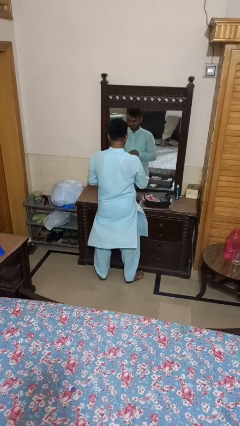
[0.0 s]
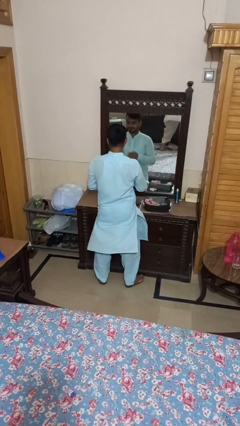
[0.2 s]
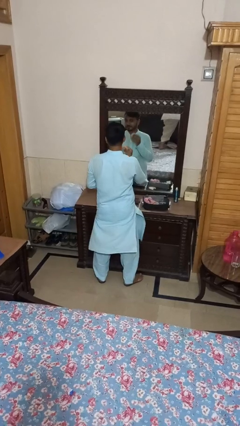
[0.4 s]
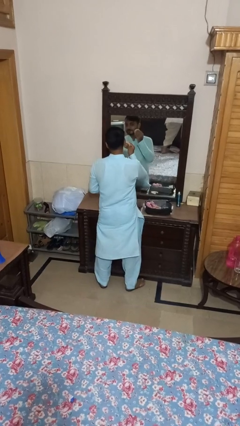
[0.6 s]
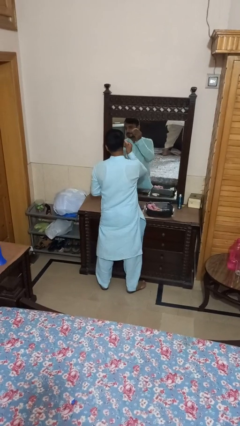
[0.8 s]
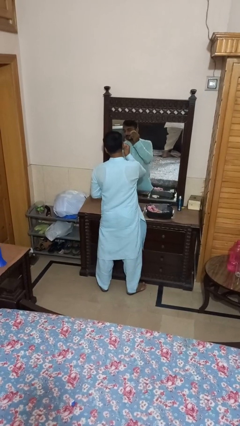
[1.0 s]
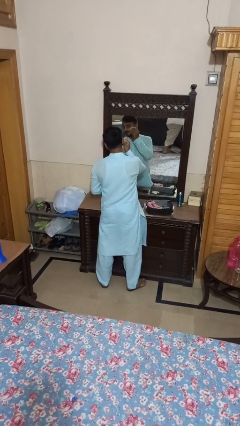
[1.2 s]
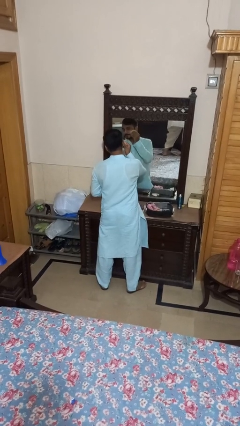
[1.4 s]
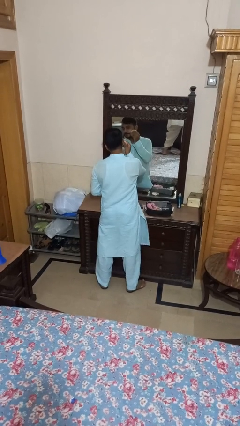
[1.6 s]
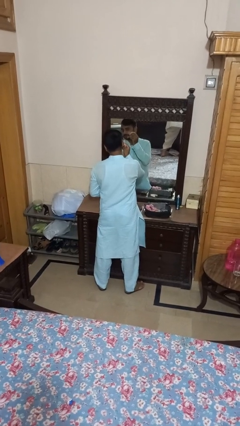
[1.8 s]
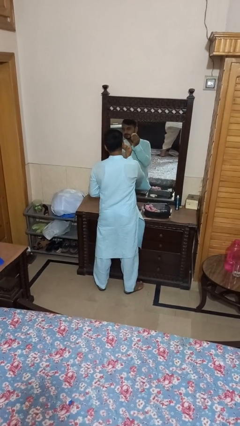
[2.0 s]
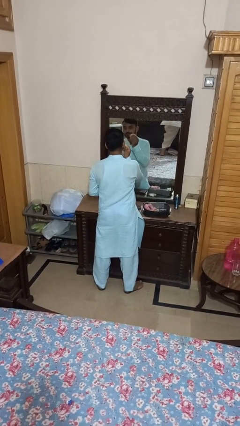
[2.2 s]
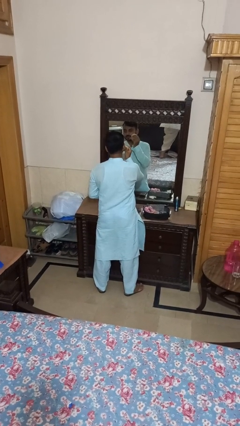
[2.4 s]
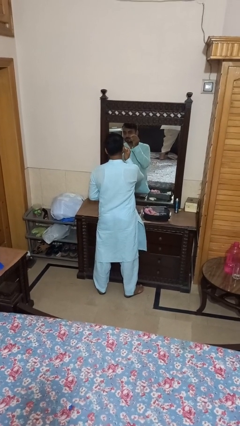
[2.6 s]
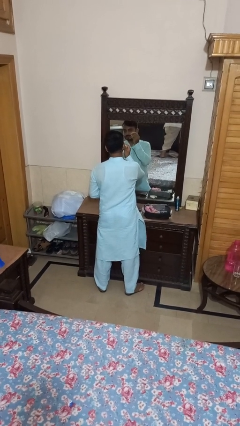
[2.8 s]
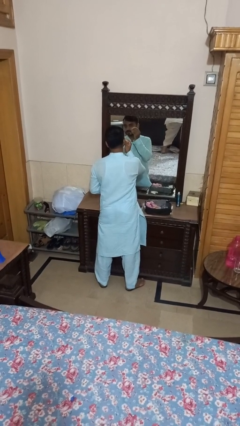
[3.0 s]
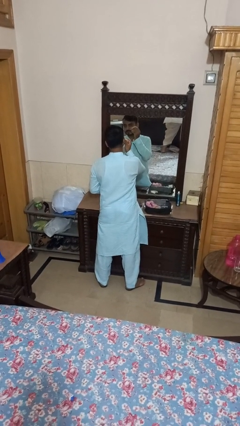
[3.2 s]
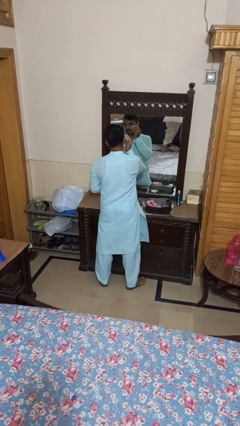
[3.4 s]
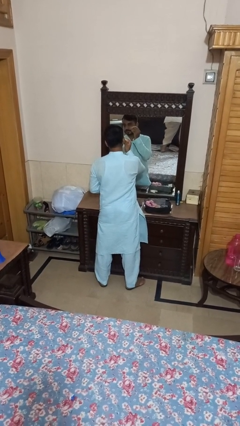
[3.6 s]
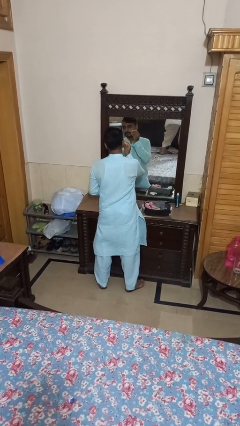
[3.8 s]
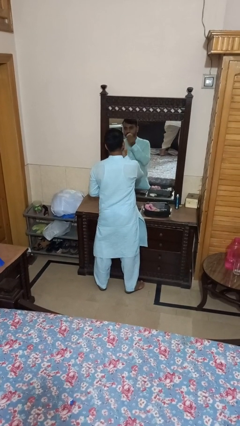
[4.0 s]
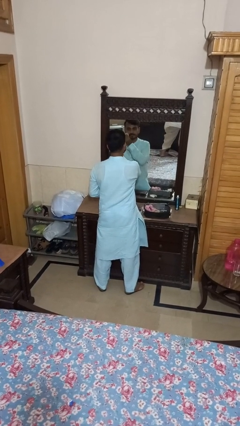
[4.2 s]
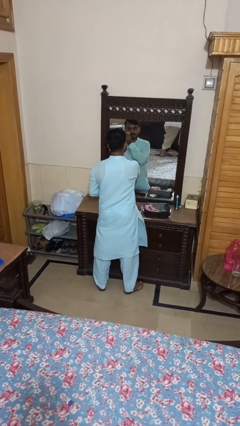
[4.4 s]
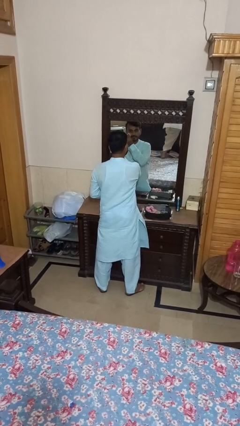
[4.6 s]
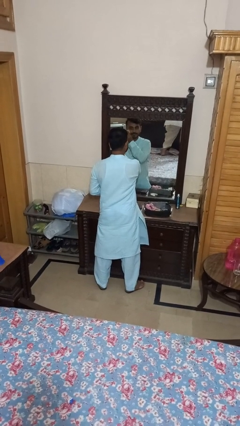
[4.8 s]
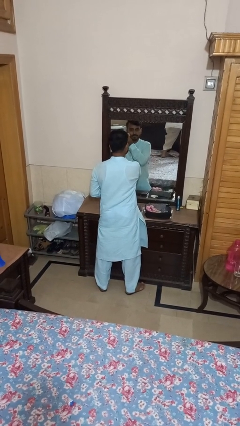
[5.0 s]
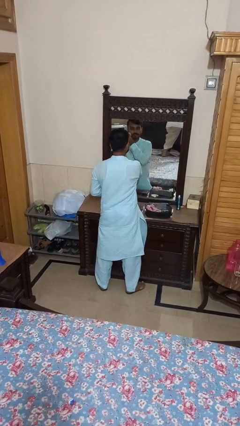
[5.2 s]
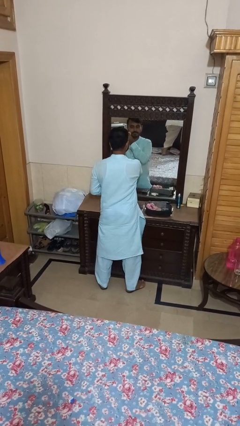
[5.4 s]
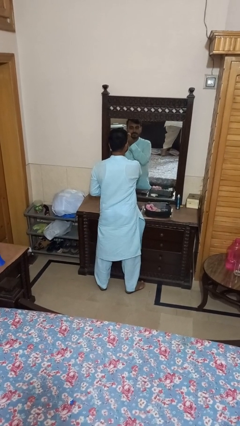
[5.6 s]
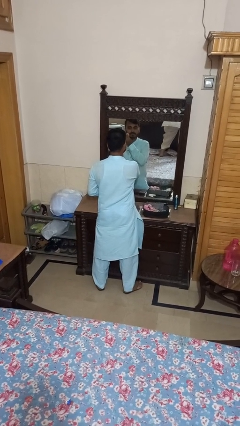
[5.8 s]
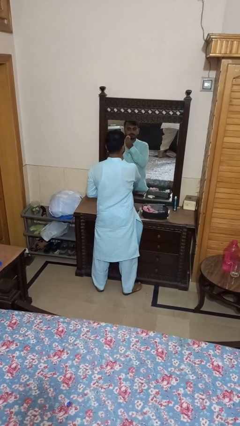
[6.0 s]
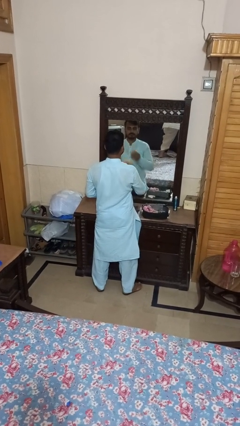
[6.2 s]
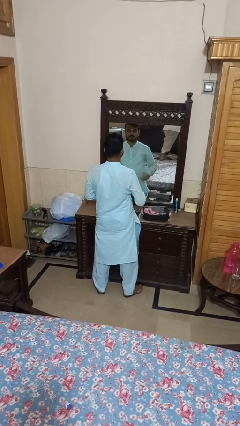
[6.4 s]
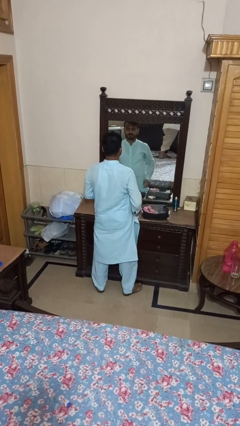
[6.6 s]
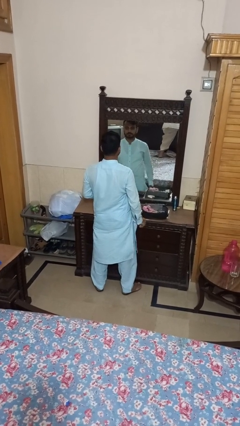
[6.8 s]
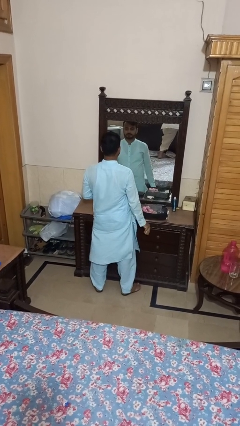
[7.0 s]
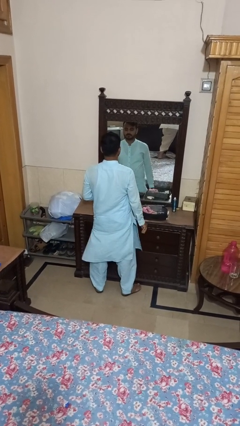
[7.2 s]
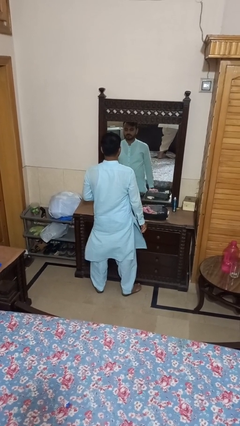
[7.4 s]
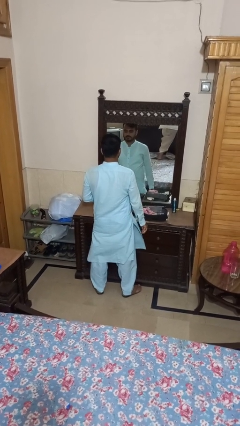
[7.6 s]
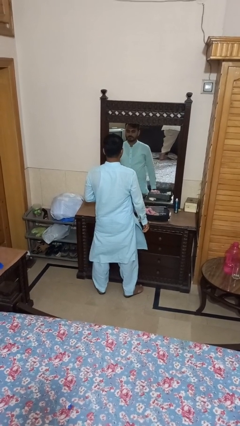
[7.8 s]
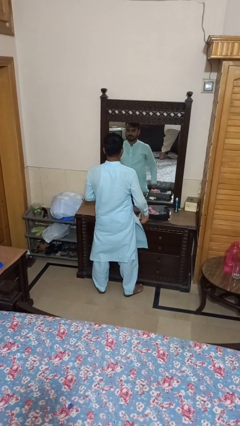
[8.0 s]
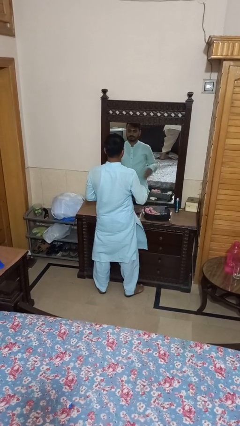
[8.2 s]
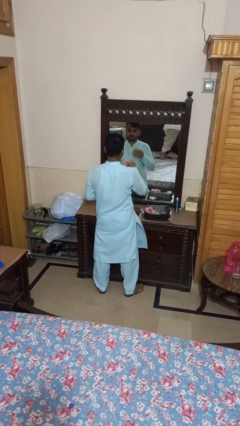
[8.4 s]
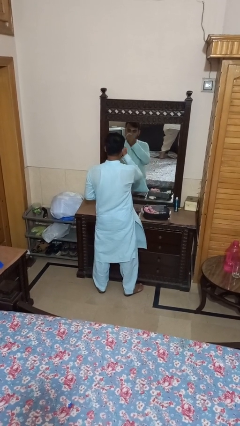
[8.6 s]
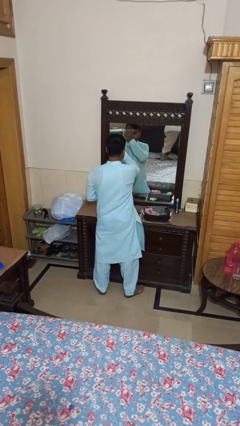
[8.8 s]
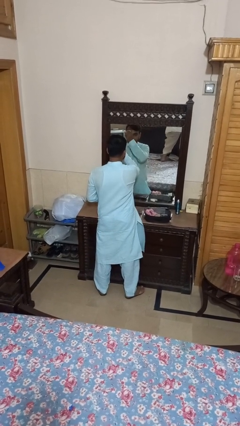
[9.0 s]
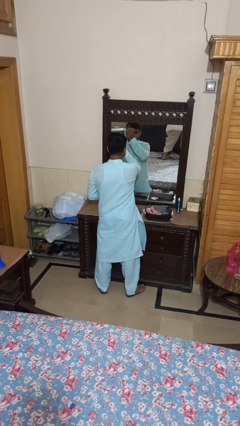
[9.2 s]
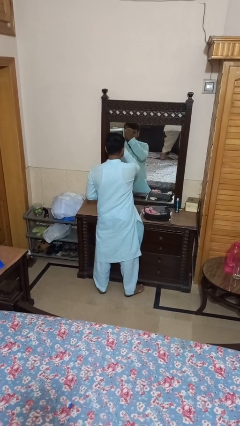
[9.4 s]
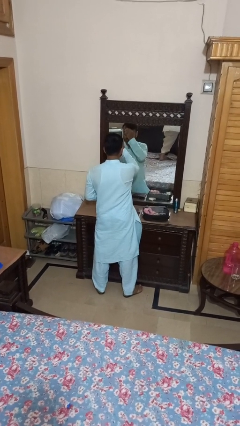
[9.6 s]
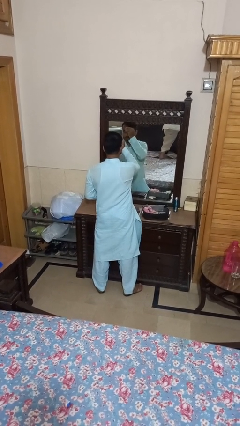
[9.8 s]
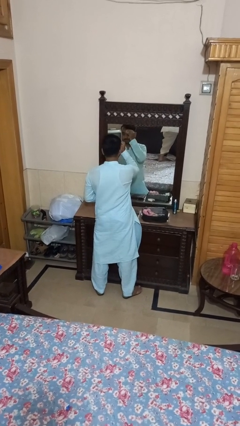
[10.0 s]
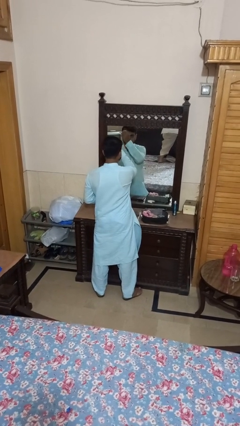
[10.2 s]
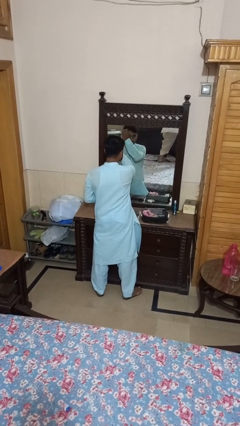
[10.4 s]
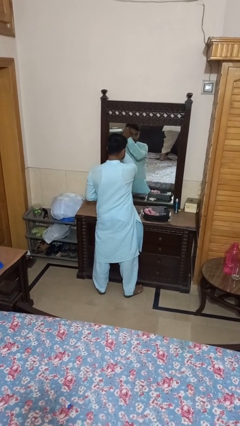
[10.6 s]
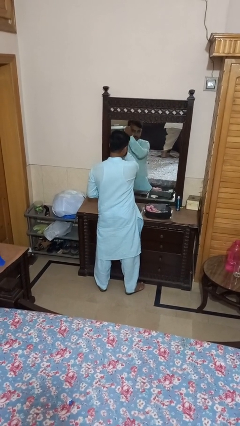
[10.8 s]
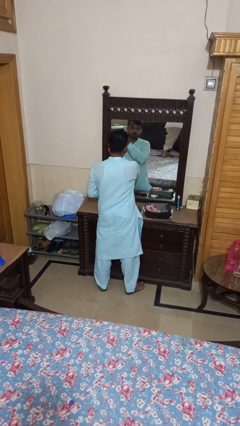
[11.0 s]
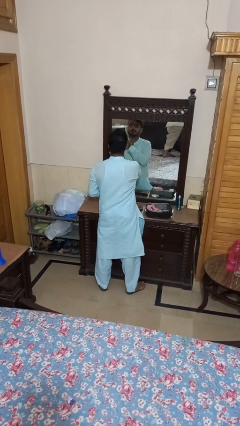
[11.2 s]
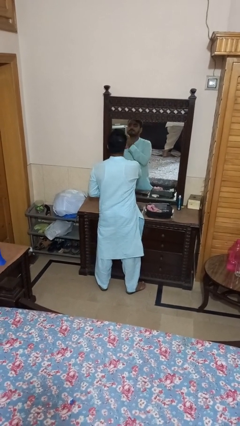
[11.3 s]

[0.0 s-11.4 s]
person applies foundation makeup

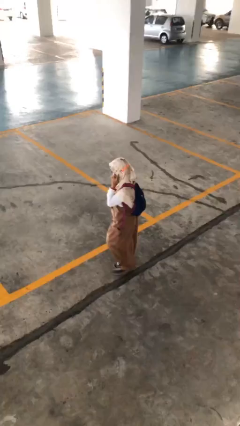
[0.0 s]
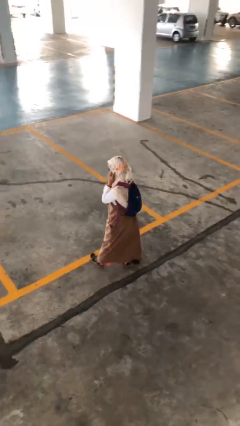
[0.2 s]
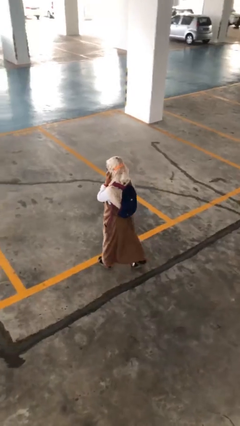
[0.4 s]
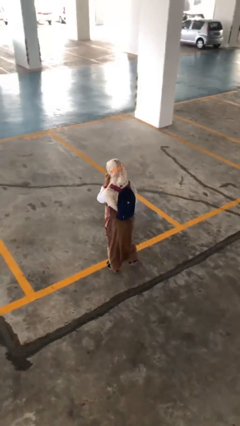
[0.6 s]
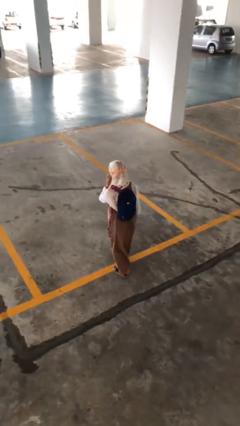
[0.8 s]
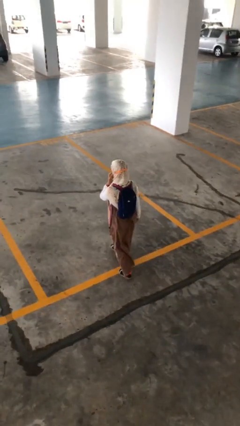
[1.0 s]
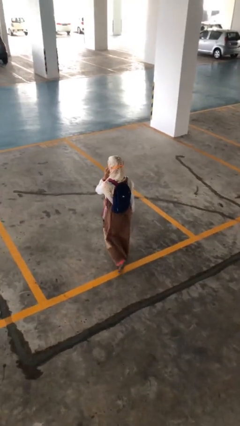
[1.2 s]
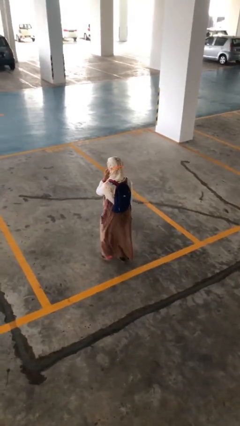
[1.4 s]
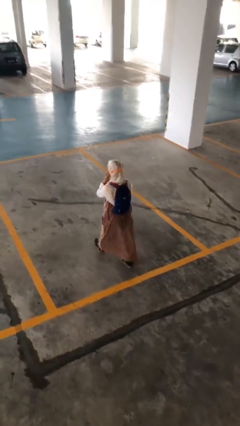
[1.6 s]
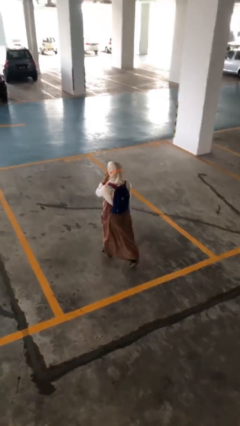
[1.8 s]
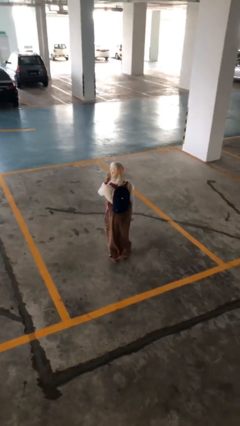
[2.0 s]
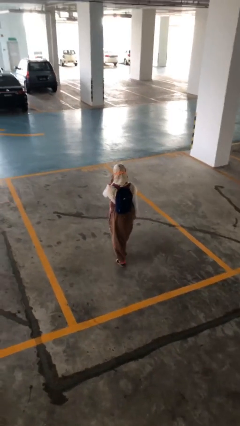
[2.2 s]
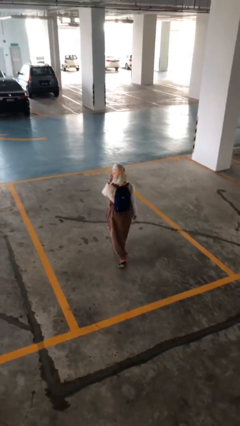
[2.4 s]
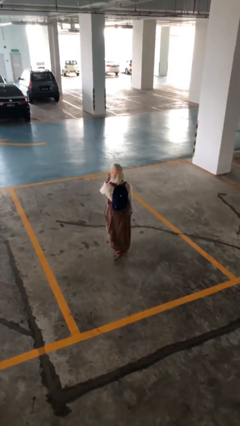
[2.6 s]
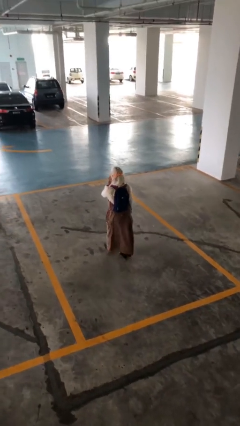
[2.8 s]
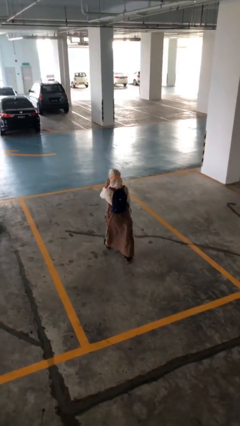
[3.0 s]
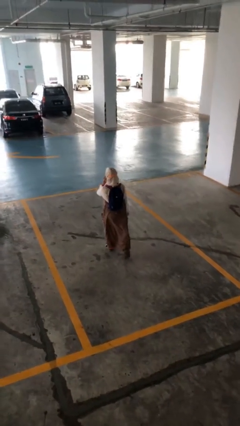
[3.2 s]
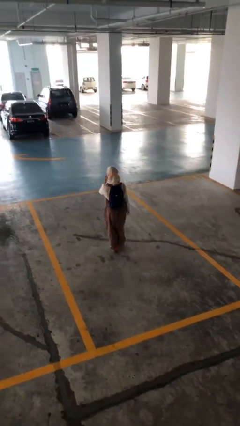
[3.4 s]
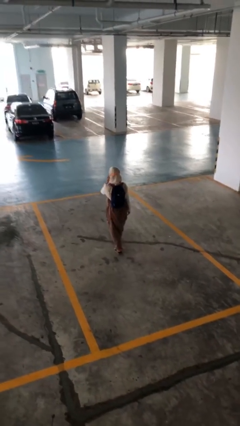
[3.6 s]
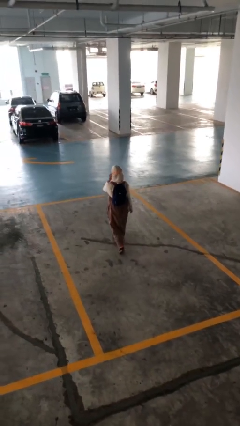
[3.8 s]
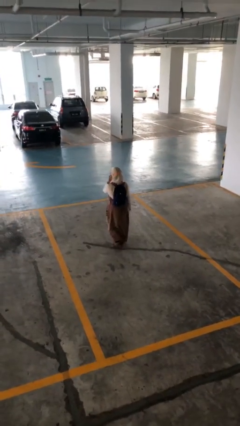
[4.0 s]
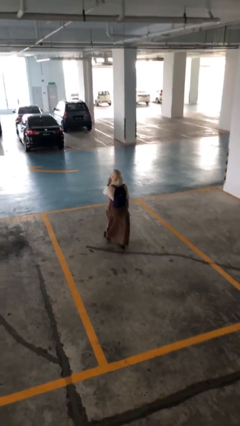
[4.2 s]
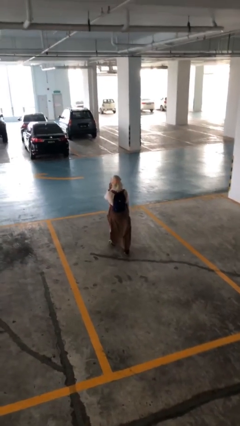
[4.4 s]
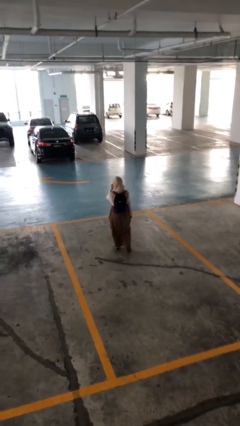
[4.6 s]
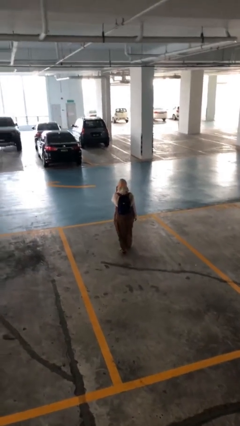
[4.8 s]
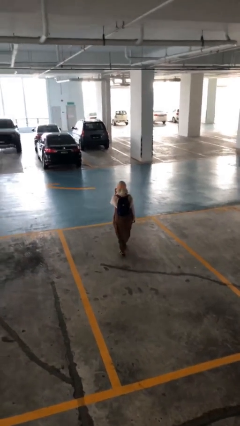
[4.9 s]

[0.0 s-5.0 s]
person talks on phone

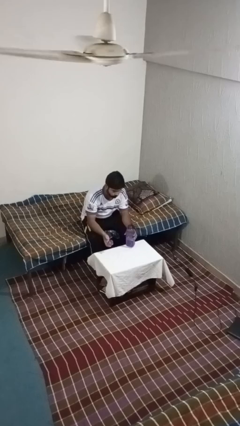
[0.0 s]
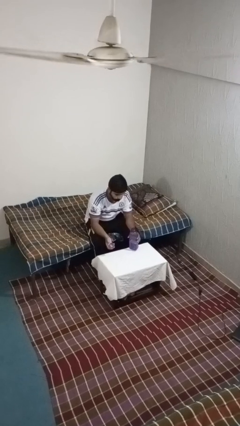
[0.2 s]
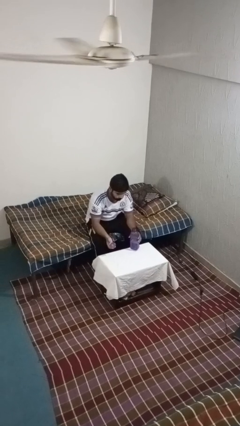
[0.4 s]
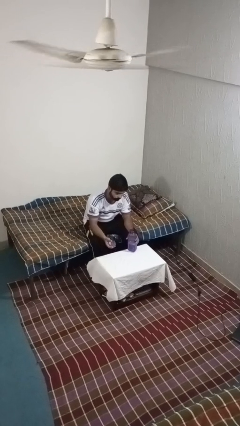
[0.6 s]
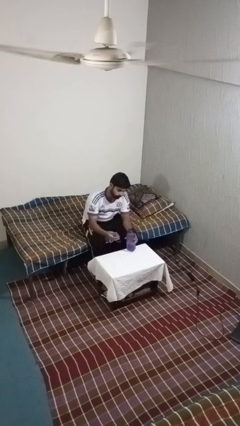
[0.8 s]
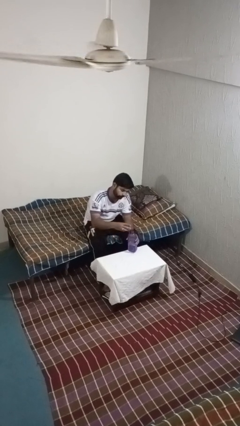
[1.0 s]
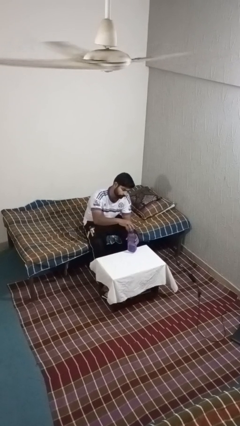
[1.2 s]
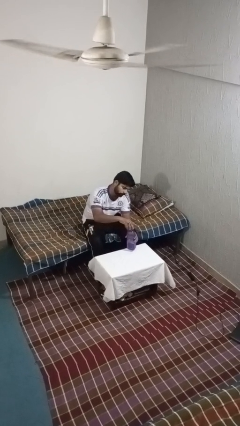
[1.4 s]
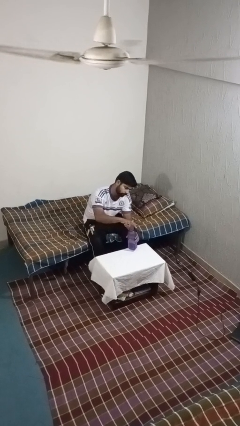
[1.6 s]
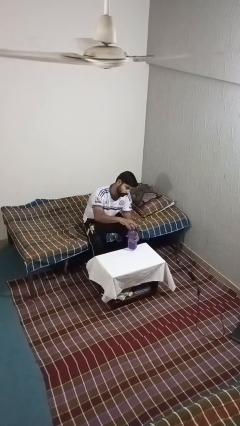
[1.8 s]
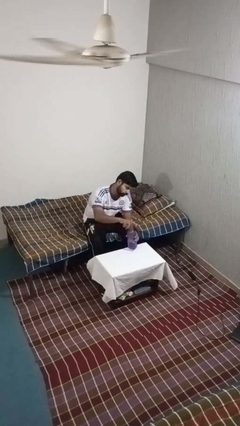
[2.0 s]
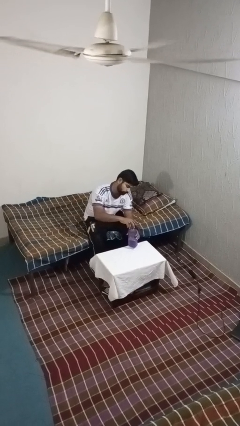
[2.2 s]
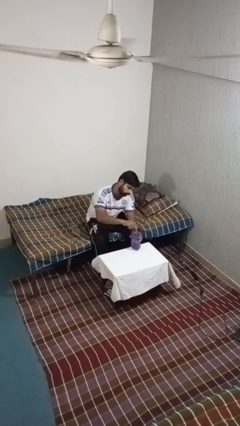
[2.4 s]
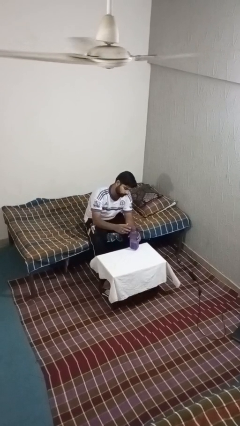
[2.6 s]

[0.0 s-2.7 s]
person screws lid to bottle
